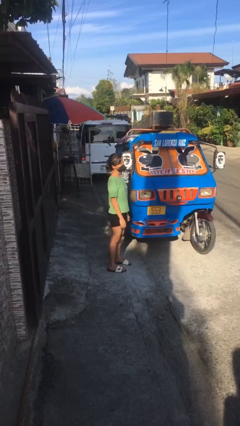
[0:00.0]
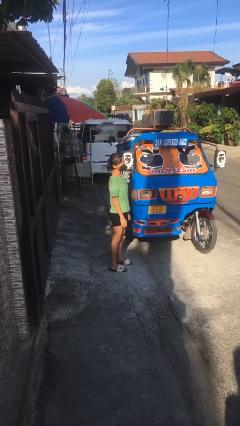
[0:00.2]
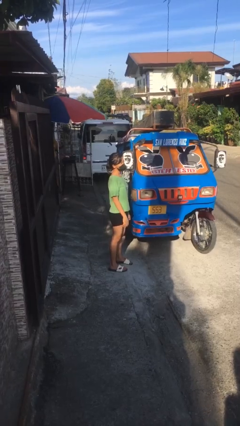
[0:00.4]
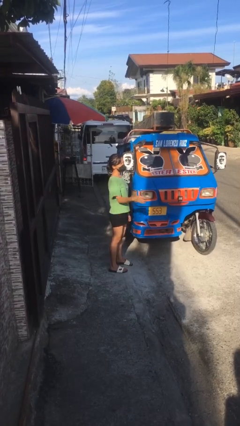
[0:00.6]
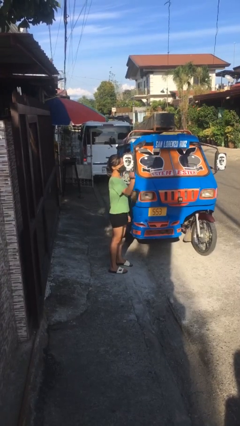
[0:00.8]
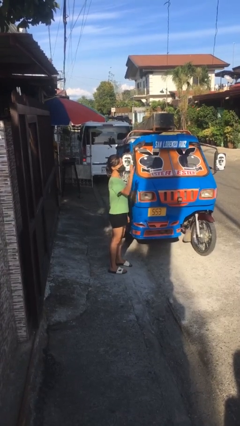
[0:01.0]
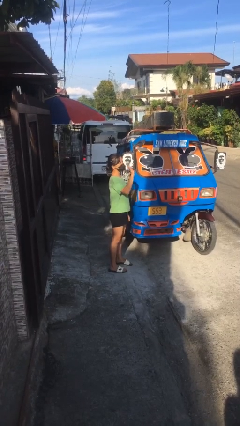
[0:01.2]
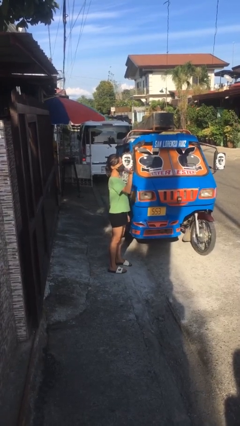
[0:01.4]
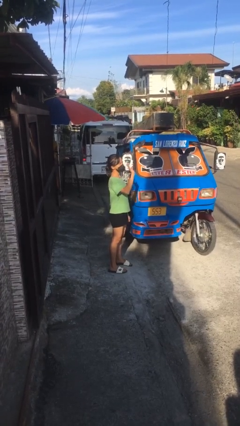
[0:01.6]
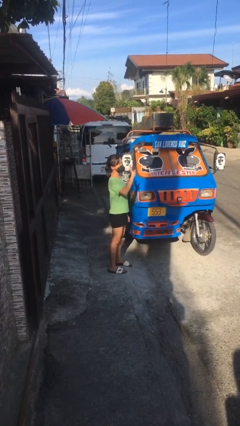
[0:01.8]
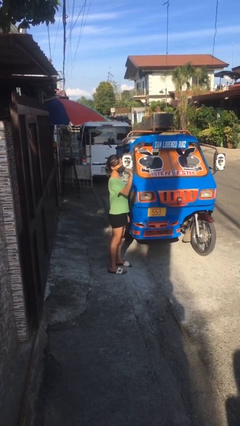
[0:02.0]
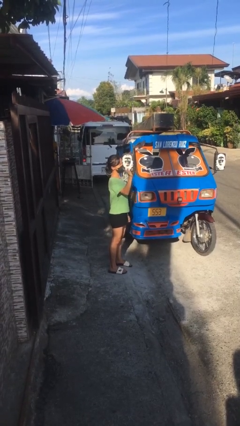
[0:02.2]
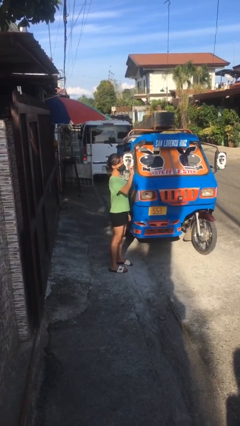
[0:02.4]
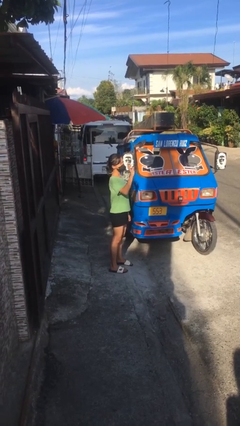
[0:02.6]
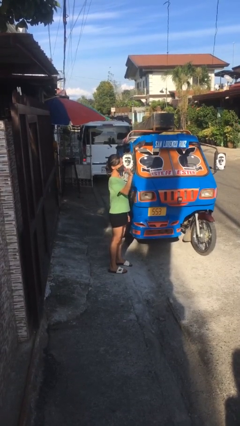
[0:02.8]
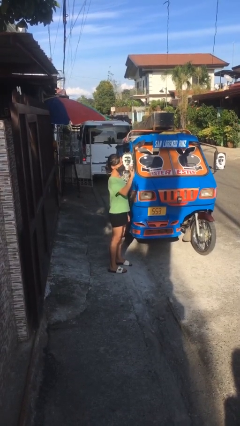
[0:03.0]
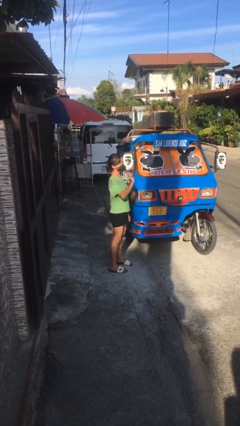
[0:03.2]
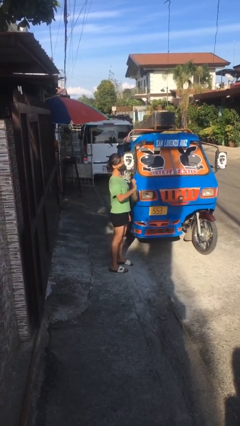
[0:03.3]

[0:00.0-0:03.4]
person waves at person

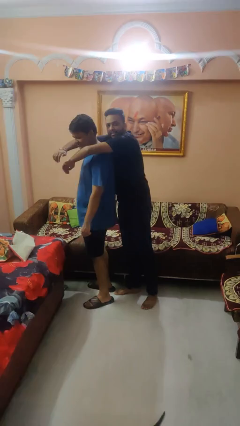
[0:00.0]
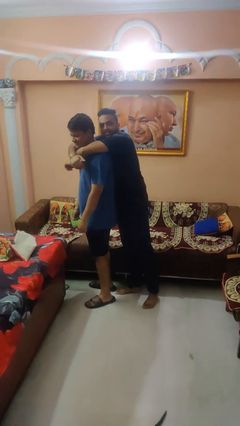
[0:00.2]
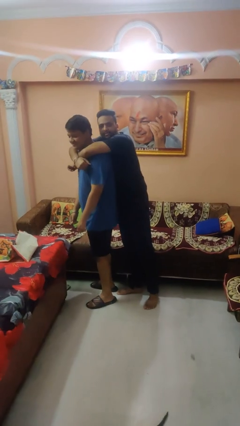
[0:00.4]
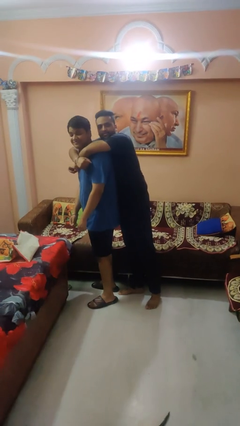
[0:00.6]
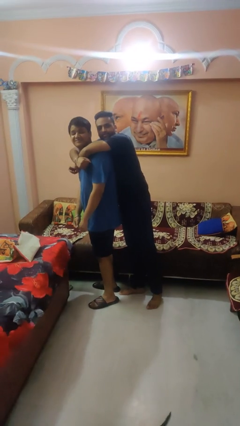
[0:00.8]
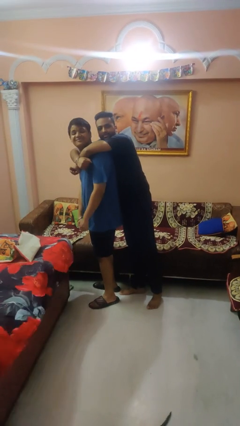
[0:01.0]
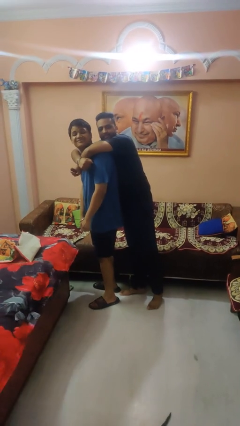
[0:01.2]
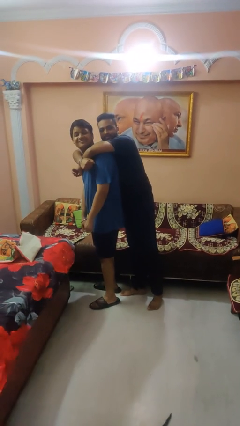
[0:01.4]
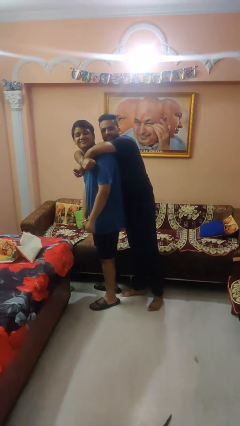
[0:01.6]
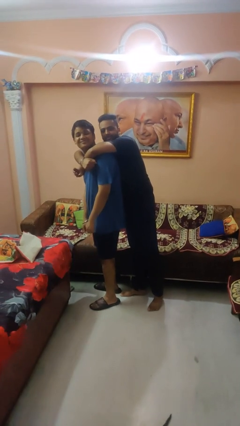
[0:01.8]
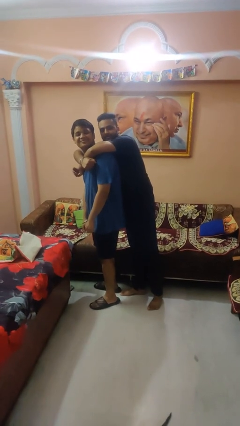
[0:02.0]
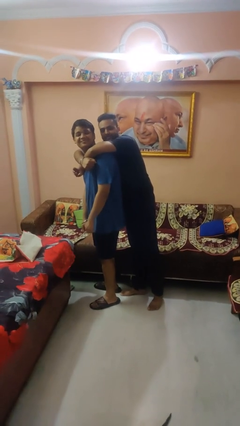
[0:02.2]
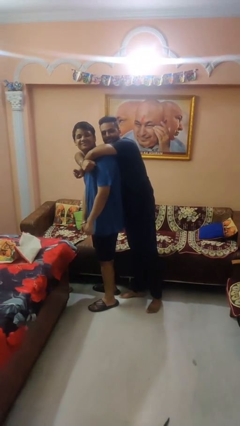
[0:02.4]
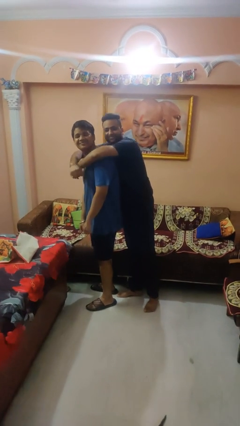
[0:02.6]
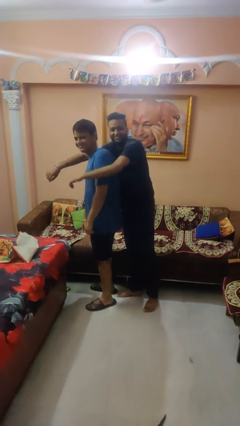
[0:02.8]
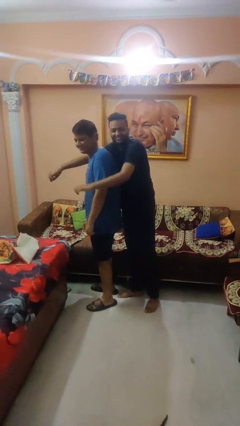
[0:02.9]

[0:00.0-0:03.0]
person hugs person from behind

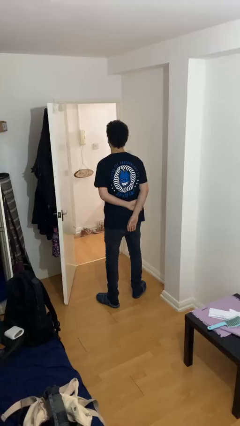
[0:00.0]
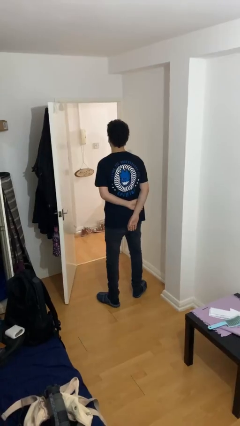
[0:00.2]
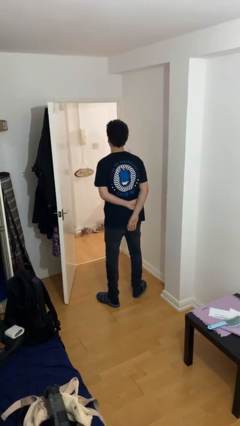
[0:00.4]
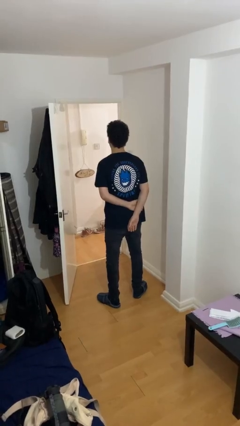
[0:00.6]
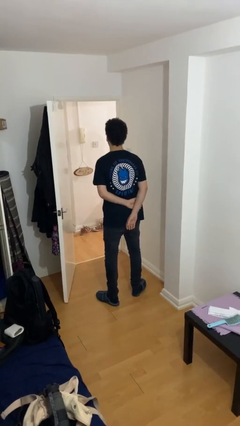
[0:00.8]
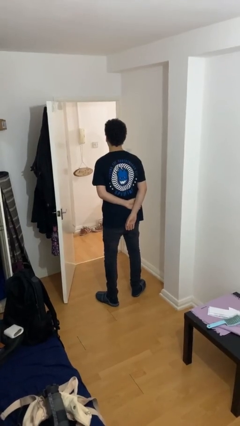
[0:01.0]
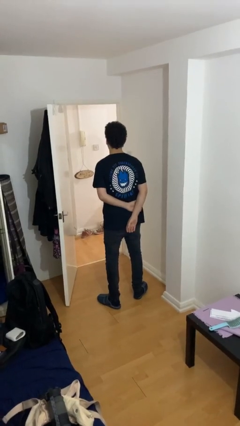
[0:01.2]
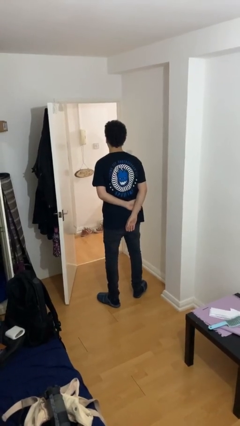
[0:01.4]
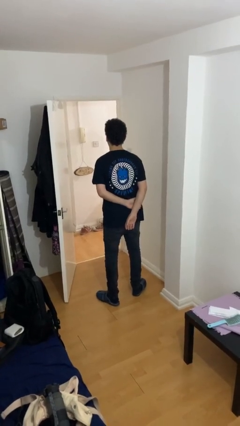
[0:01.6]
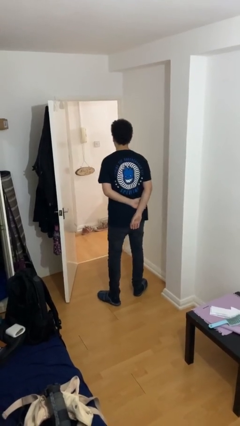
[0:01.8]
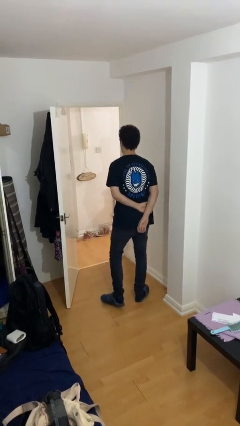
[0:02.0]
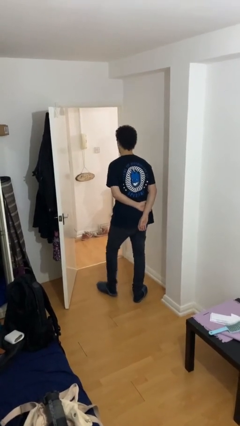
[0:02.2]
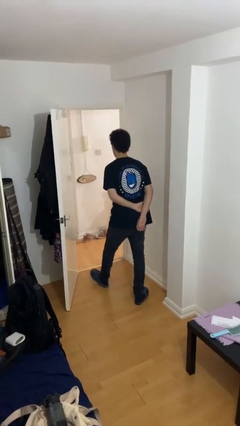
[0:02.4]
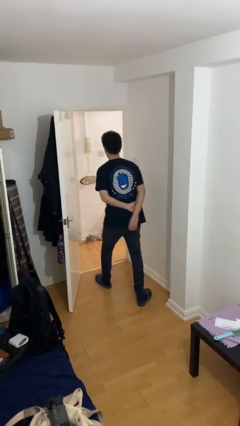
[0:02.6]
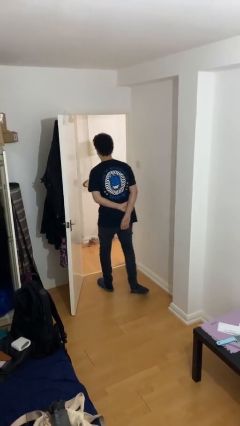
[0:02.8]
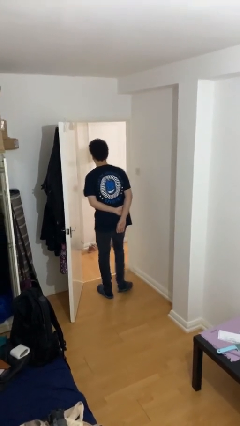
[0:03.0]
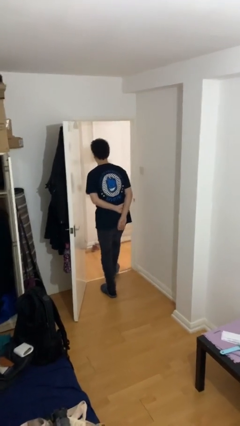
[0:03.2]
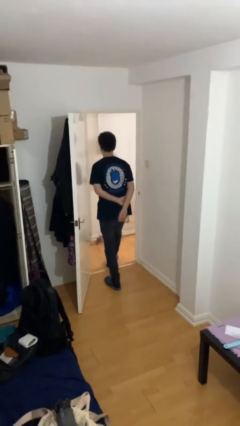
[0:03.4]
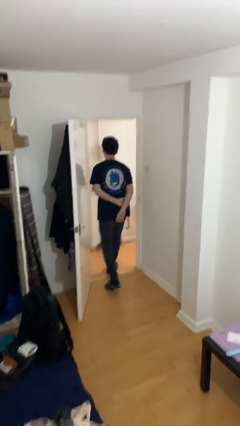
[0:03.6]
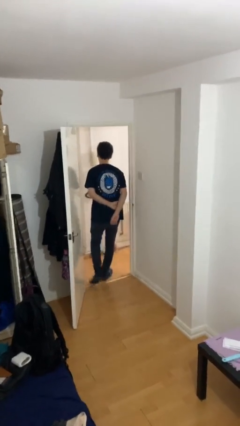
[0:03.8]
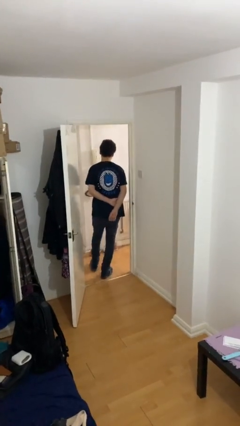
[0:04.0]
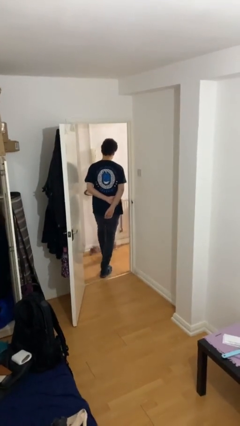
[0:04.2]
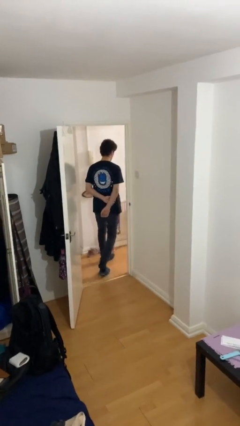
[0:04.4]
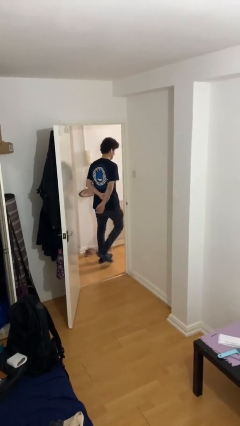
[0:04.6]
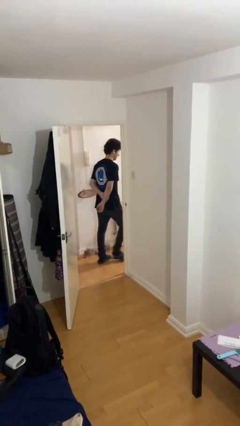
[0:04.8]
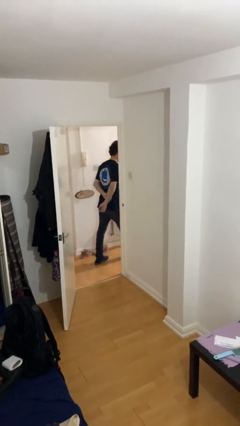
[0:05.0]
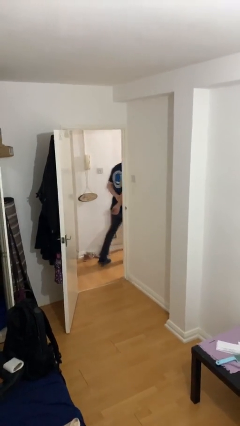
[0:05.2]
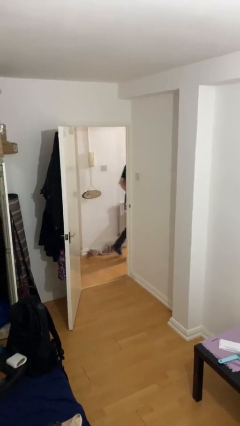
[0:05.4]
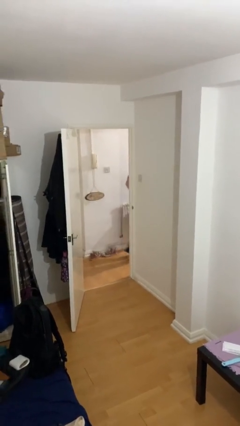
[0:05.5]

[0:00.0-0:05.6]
person exits scene through structure

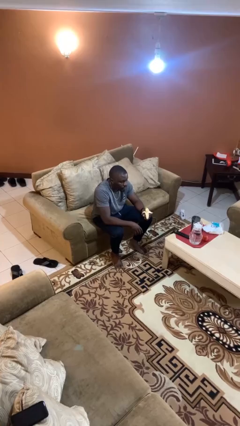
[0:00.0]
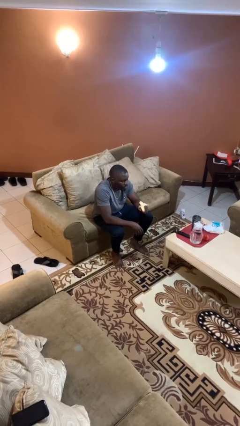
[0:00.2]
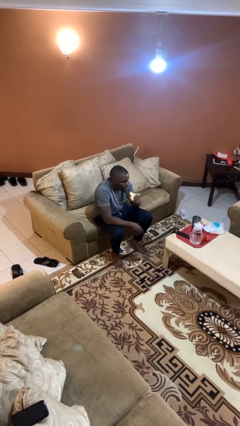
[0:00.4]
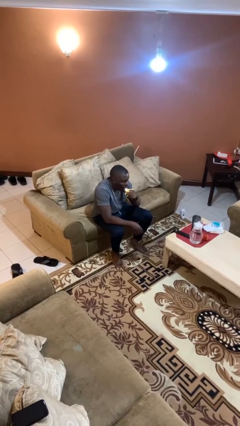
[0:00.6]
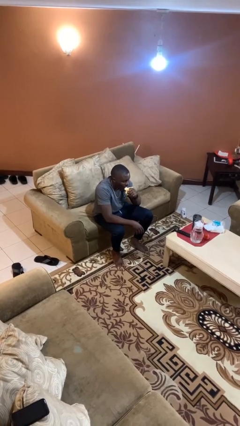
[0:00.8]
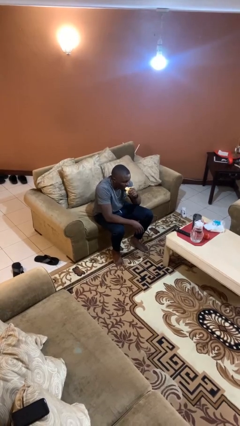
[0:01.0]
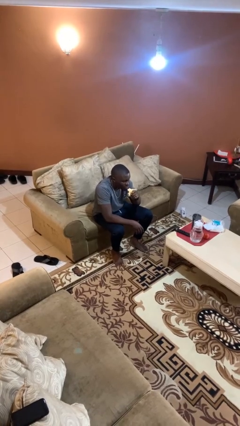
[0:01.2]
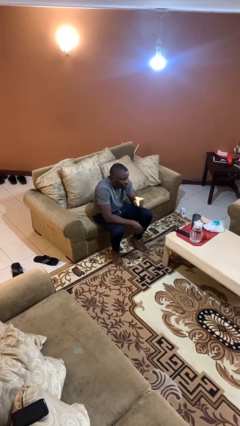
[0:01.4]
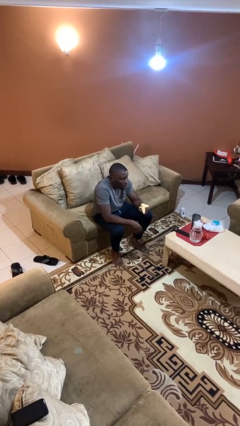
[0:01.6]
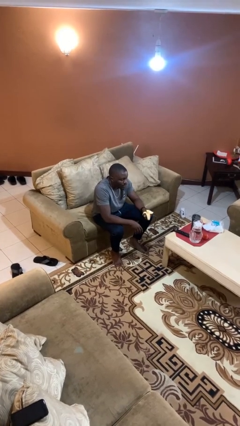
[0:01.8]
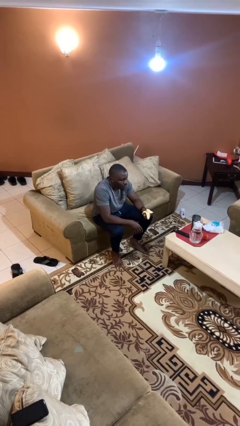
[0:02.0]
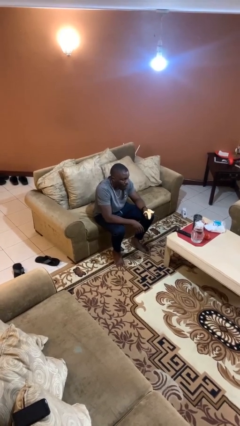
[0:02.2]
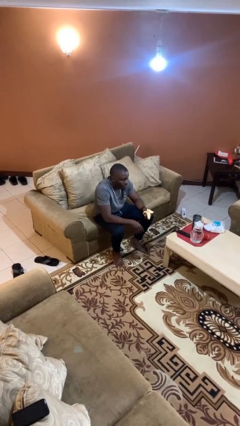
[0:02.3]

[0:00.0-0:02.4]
person eats banana

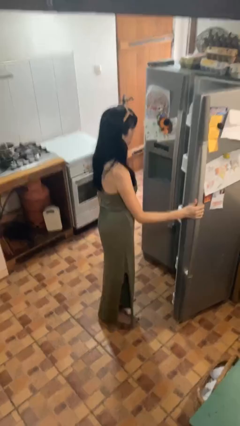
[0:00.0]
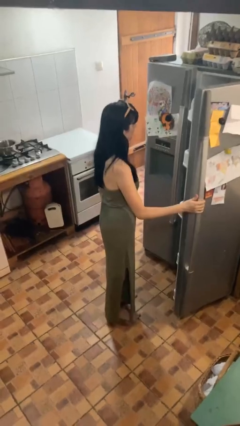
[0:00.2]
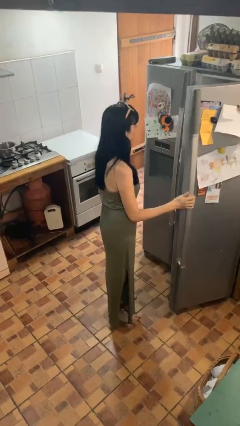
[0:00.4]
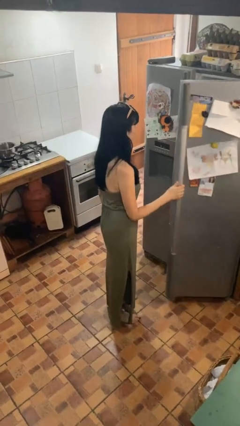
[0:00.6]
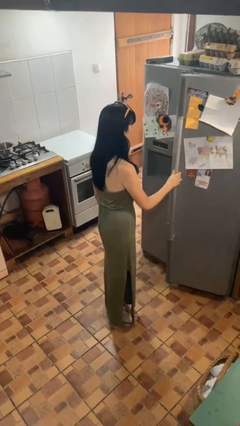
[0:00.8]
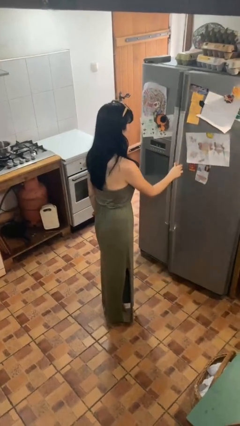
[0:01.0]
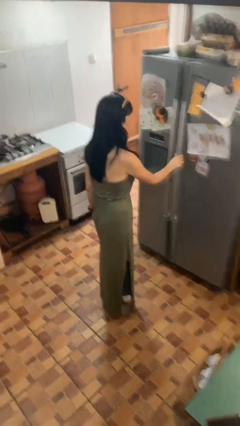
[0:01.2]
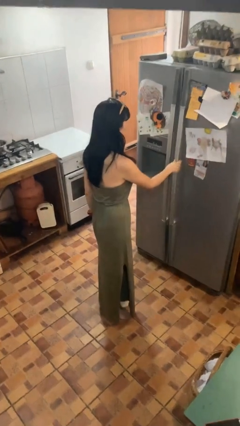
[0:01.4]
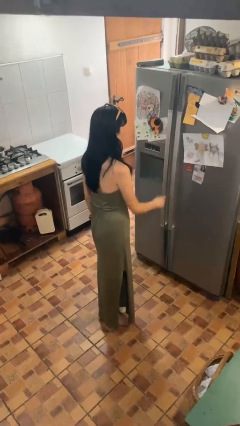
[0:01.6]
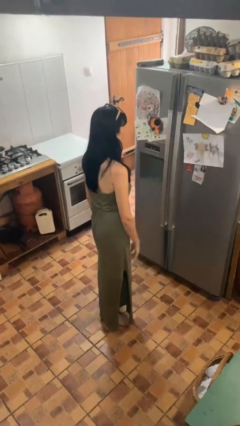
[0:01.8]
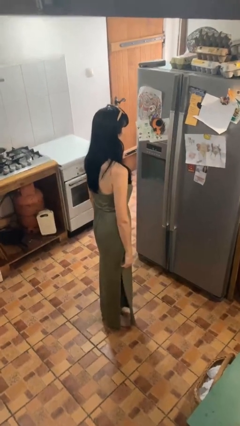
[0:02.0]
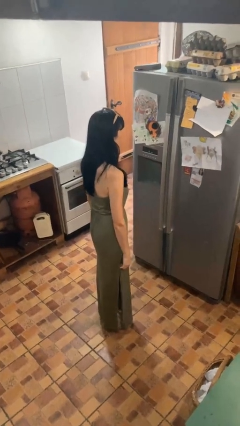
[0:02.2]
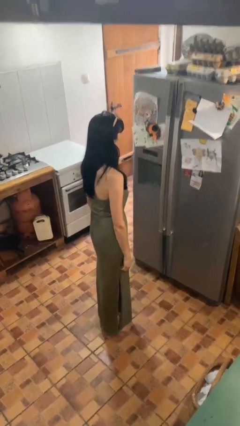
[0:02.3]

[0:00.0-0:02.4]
person closes refrigerator

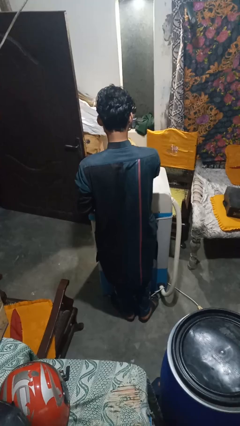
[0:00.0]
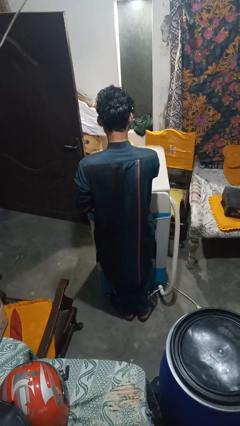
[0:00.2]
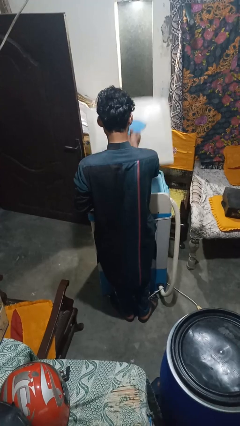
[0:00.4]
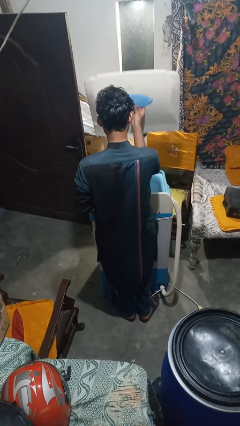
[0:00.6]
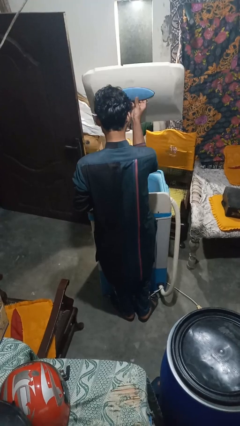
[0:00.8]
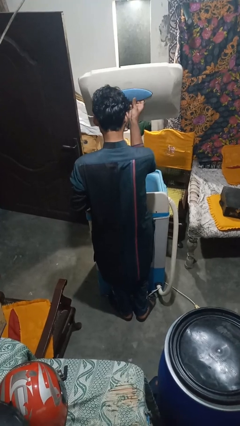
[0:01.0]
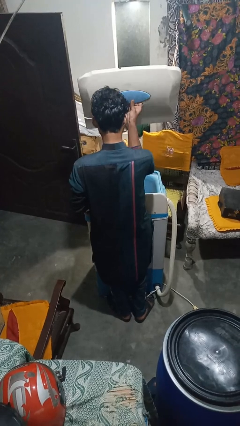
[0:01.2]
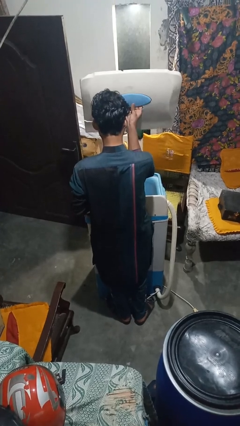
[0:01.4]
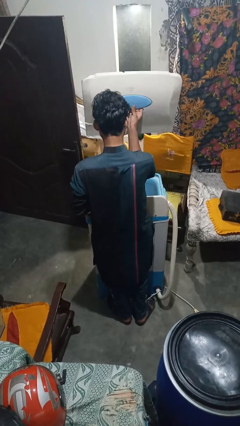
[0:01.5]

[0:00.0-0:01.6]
person opens clothes washer
